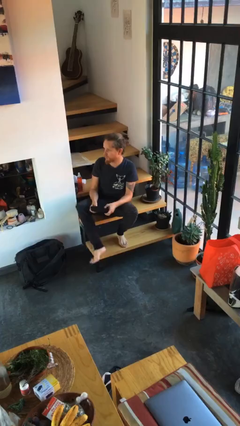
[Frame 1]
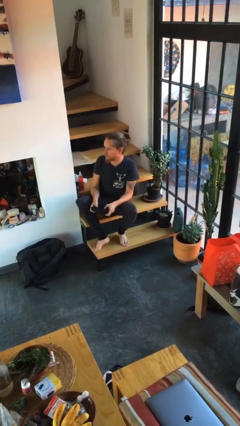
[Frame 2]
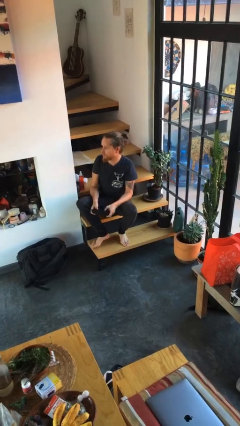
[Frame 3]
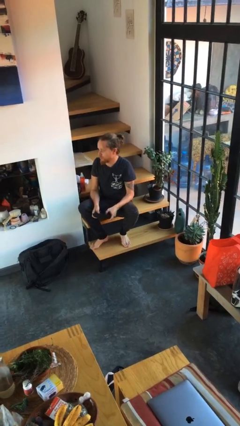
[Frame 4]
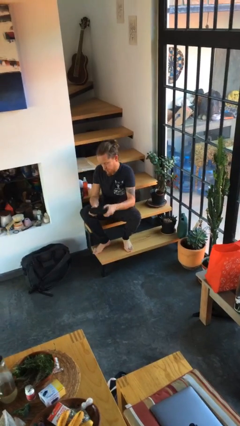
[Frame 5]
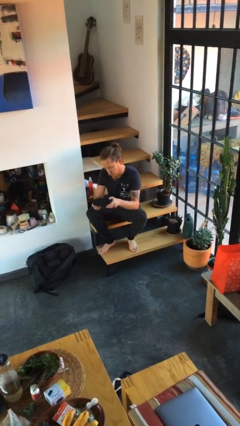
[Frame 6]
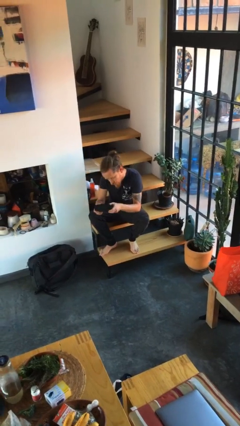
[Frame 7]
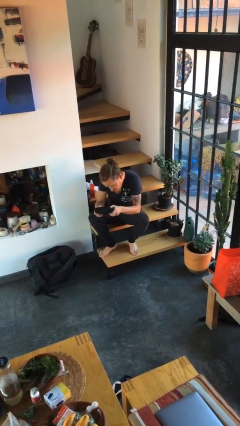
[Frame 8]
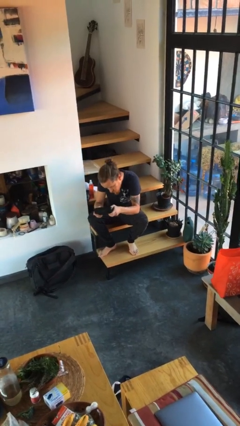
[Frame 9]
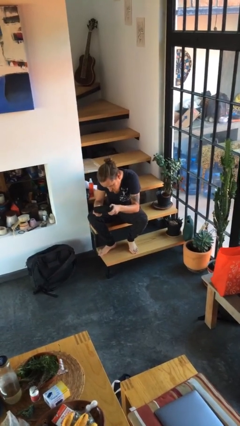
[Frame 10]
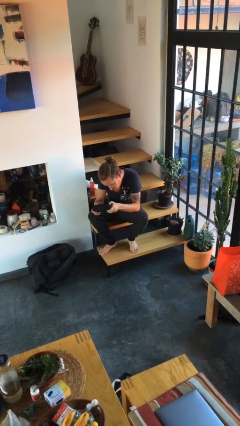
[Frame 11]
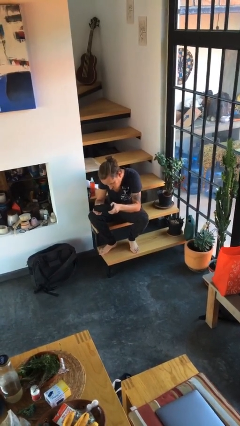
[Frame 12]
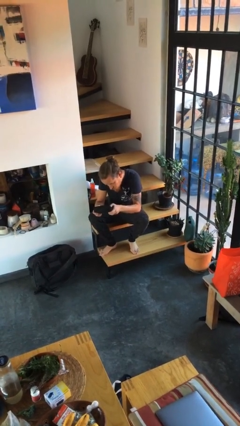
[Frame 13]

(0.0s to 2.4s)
person interacts with handheld game

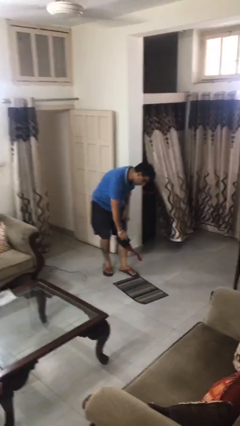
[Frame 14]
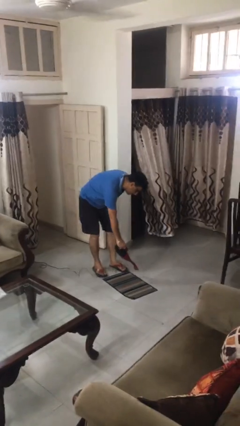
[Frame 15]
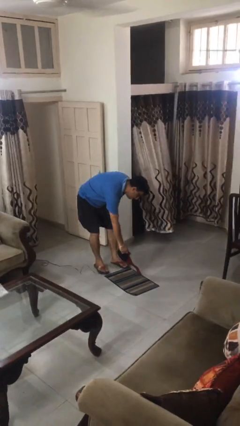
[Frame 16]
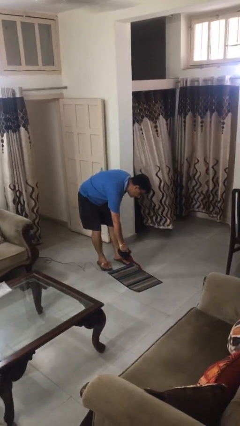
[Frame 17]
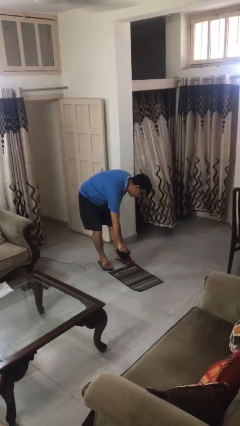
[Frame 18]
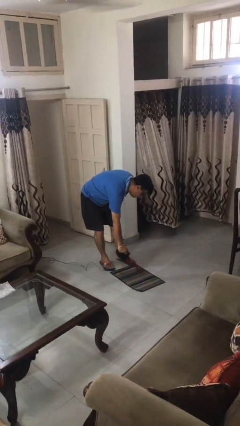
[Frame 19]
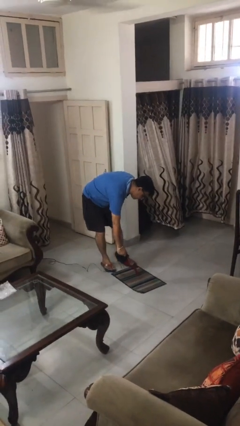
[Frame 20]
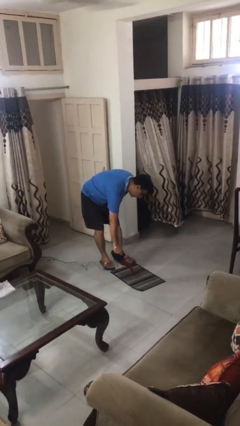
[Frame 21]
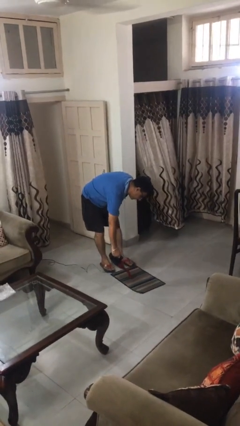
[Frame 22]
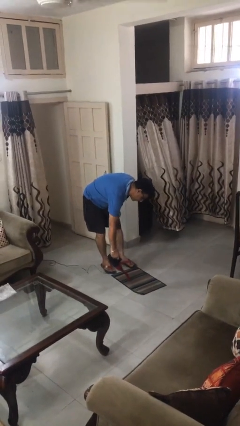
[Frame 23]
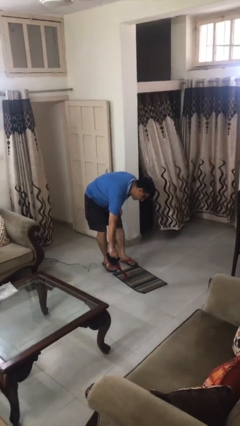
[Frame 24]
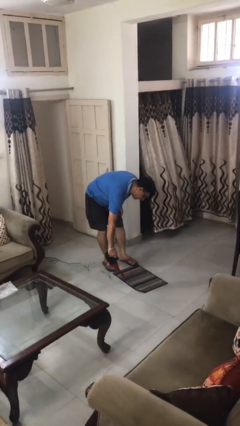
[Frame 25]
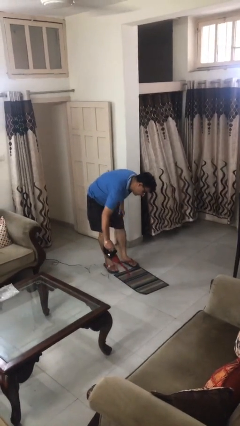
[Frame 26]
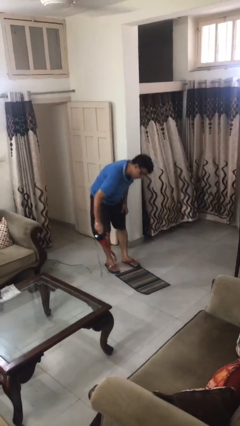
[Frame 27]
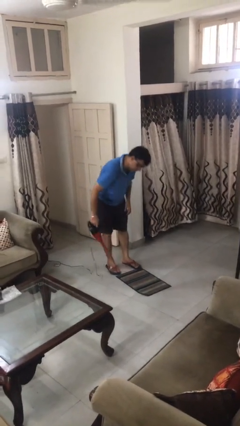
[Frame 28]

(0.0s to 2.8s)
person vacuums carpet

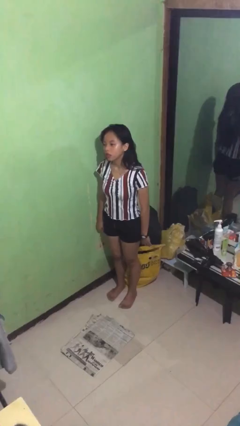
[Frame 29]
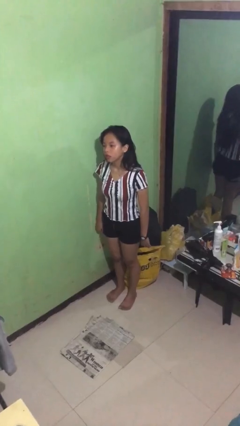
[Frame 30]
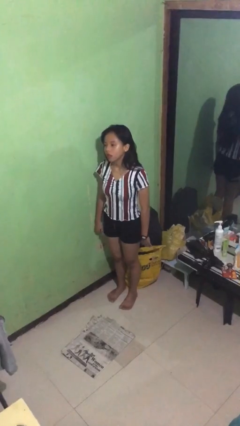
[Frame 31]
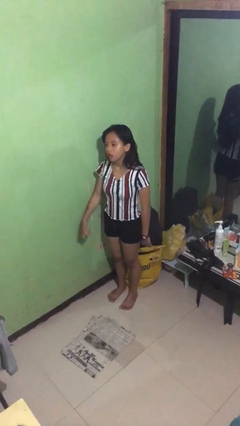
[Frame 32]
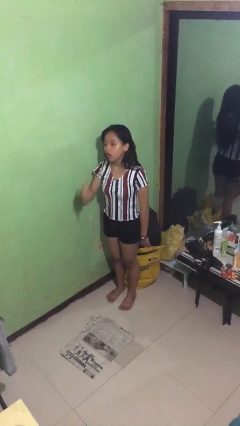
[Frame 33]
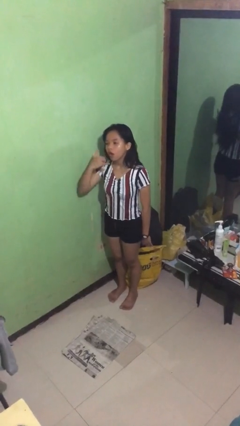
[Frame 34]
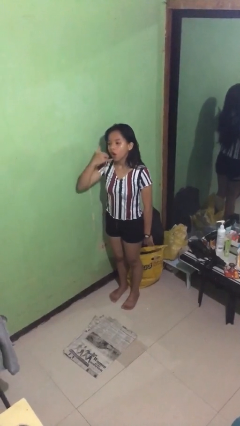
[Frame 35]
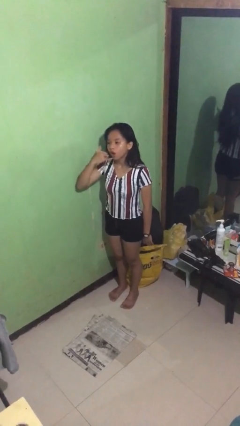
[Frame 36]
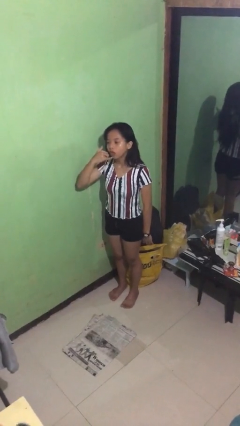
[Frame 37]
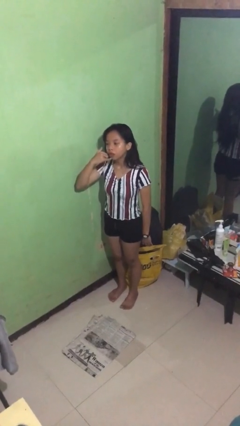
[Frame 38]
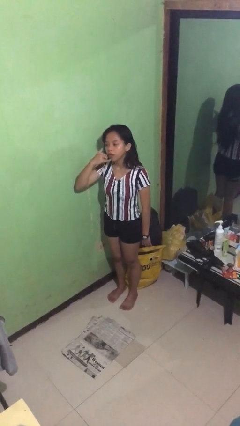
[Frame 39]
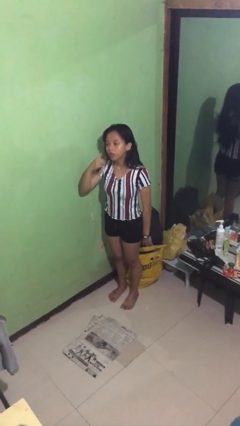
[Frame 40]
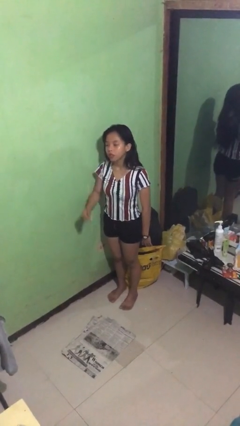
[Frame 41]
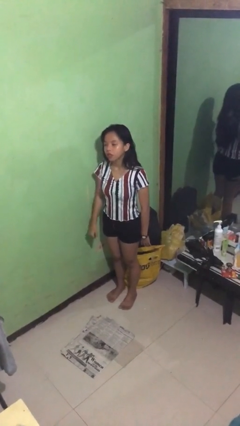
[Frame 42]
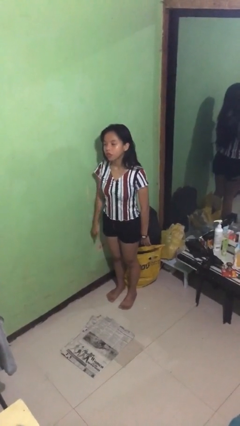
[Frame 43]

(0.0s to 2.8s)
person gestures call me

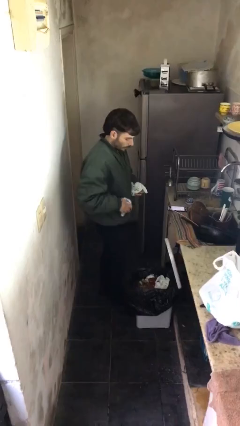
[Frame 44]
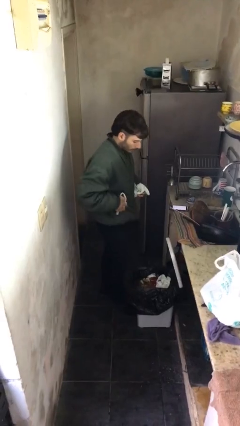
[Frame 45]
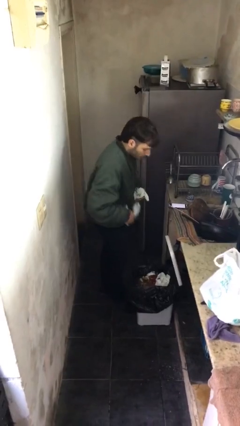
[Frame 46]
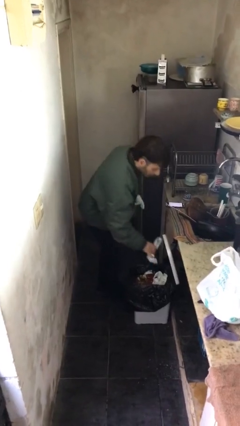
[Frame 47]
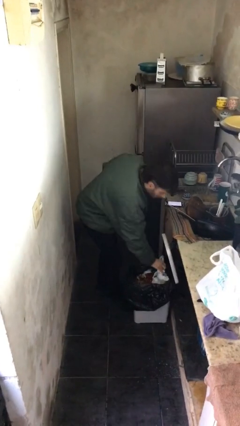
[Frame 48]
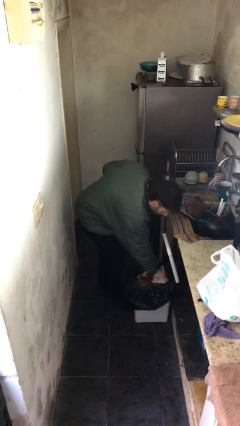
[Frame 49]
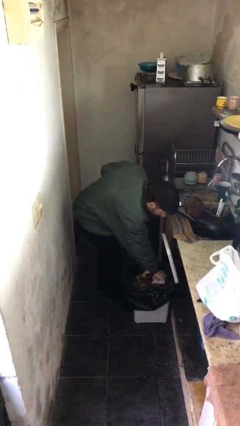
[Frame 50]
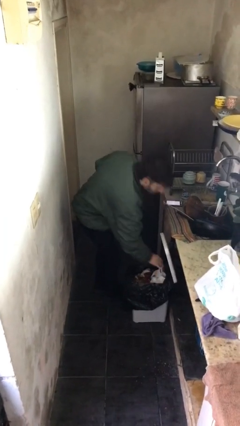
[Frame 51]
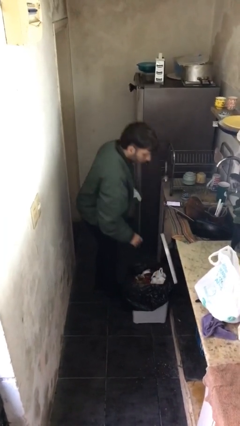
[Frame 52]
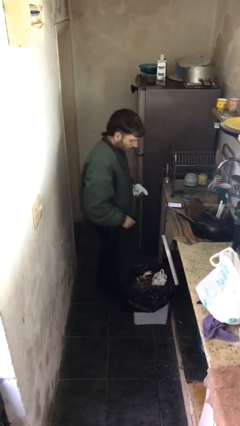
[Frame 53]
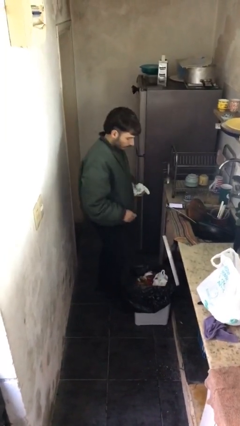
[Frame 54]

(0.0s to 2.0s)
person discards trash

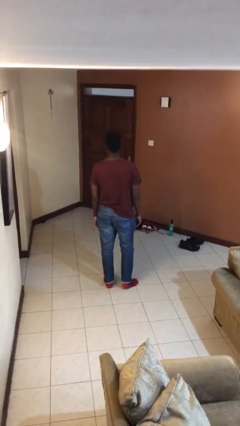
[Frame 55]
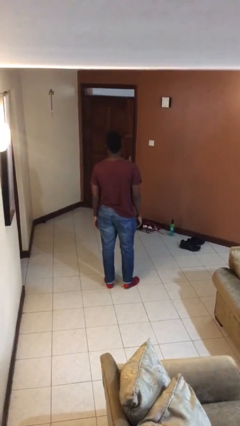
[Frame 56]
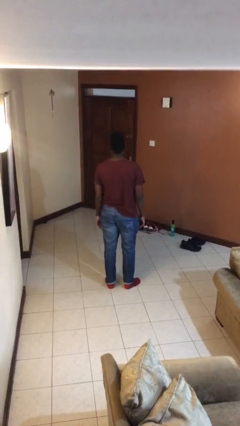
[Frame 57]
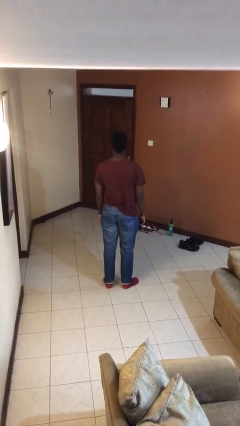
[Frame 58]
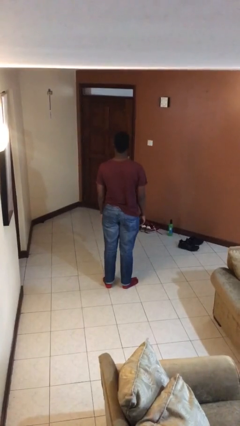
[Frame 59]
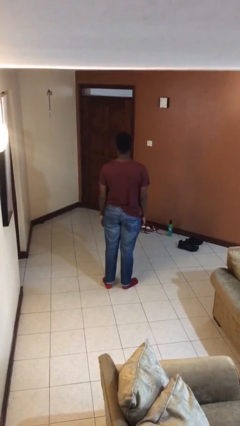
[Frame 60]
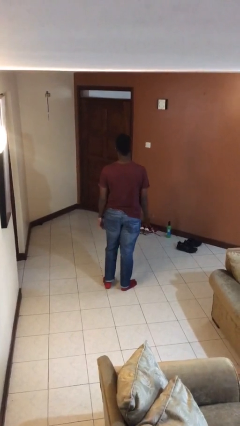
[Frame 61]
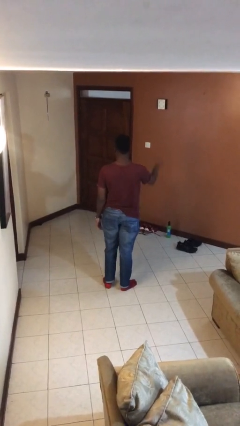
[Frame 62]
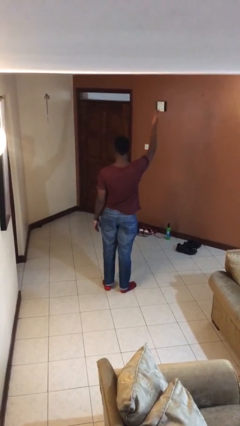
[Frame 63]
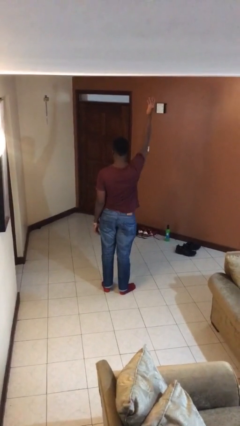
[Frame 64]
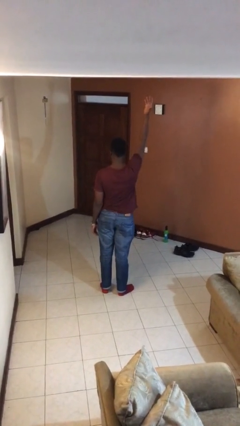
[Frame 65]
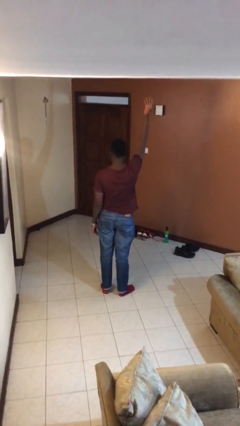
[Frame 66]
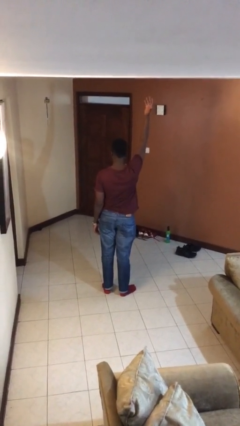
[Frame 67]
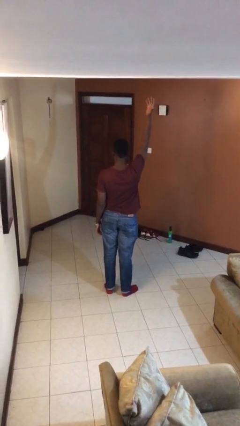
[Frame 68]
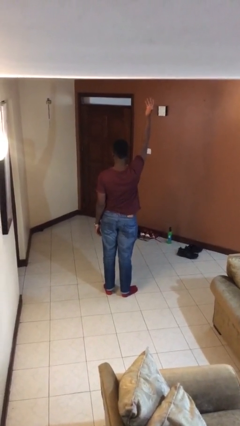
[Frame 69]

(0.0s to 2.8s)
person gestures swipe up

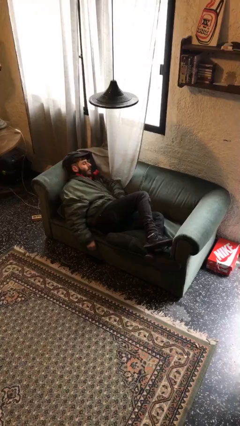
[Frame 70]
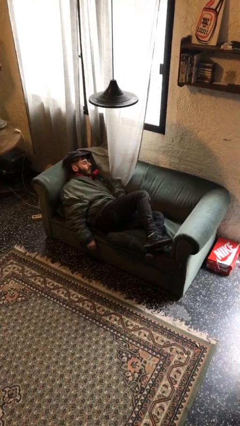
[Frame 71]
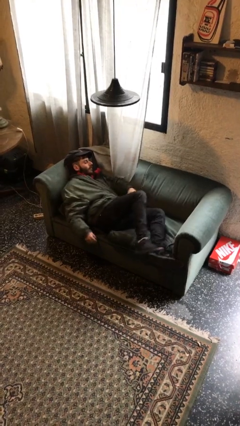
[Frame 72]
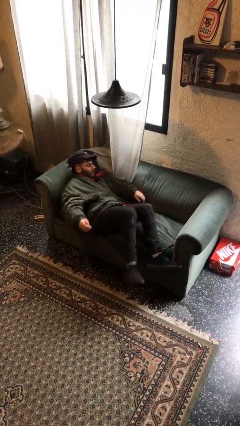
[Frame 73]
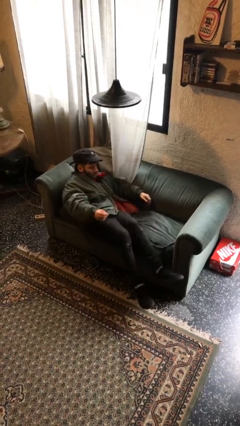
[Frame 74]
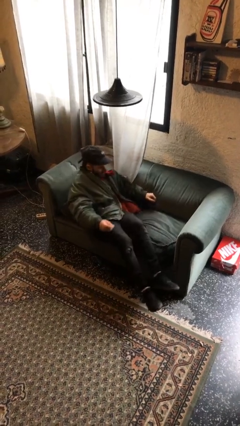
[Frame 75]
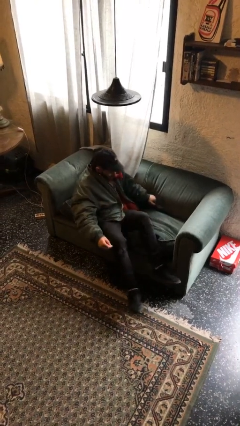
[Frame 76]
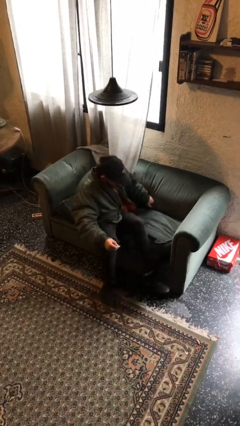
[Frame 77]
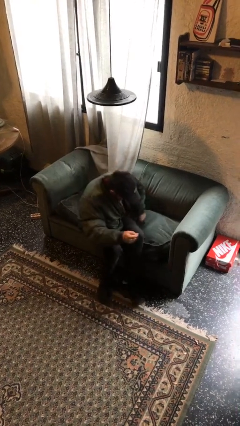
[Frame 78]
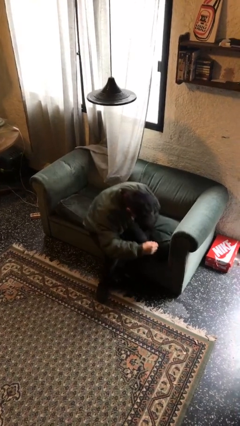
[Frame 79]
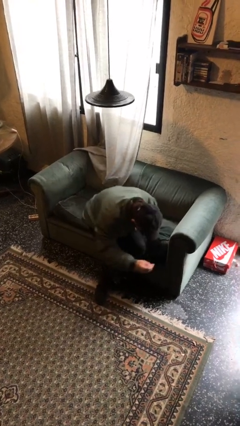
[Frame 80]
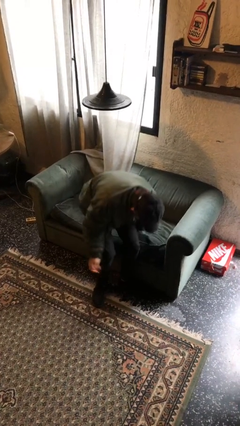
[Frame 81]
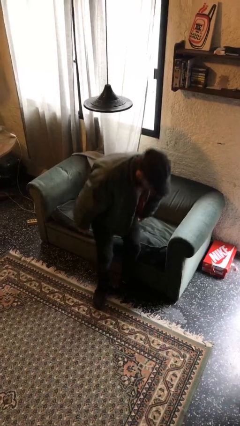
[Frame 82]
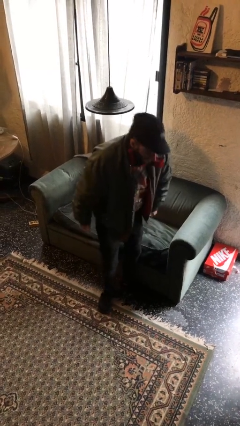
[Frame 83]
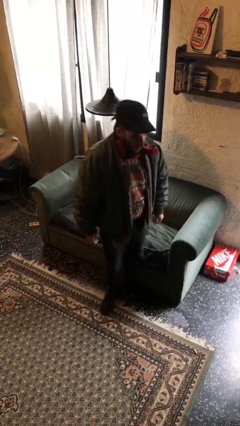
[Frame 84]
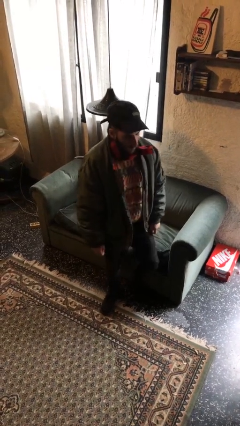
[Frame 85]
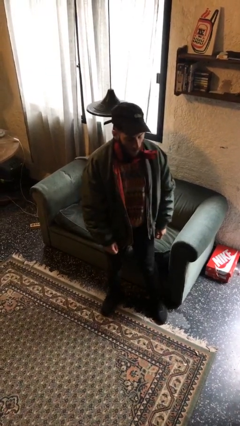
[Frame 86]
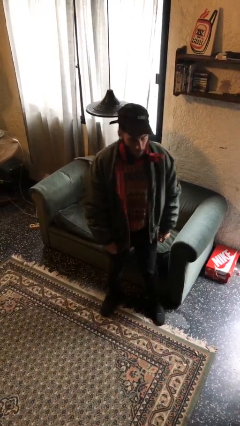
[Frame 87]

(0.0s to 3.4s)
person stands up

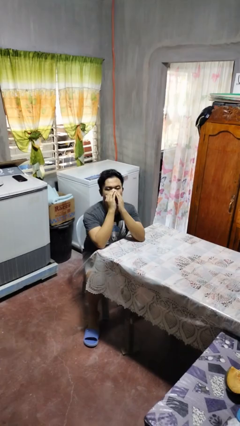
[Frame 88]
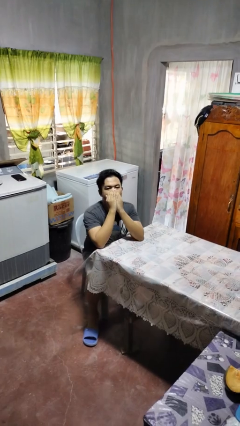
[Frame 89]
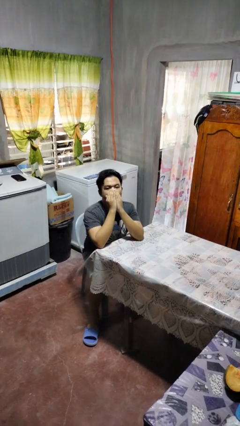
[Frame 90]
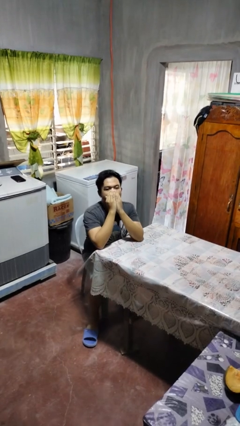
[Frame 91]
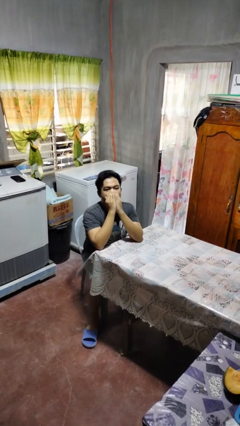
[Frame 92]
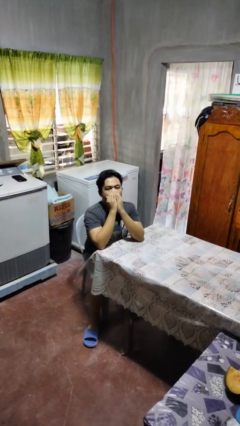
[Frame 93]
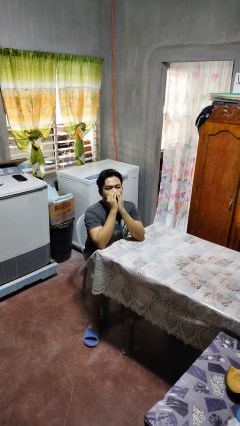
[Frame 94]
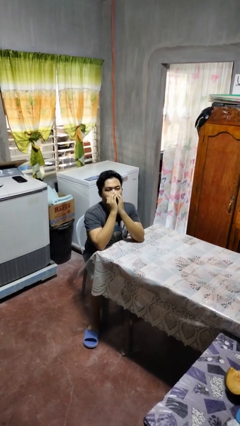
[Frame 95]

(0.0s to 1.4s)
person yawns
